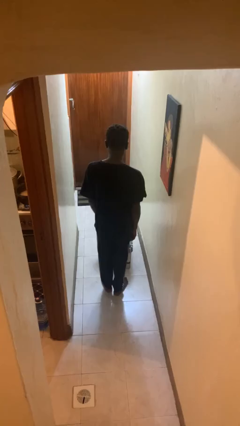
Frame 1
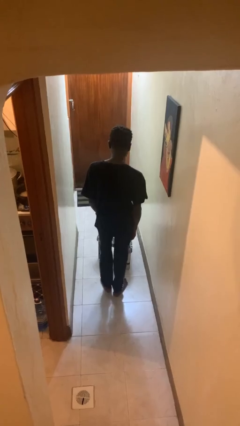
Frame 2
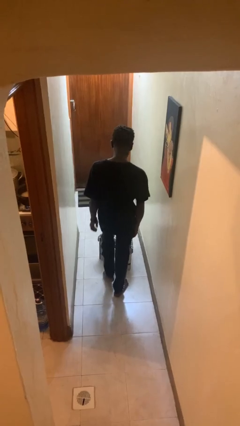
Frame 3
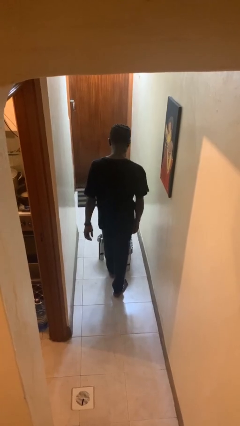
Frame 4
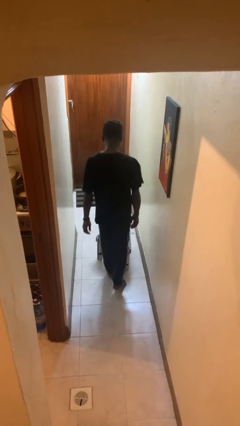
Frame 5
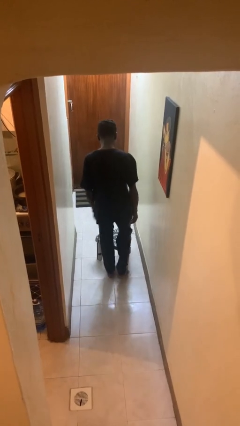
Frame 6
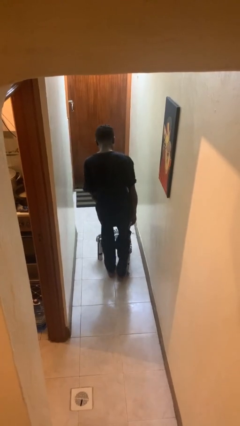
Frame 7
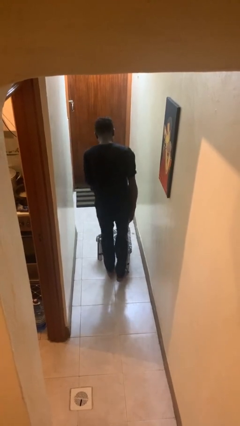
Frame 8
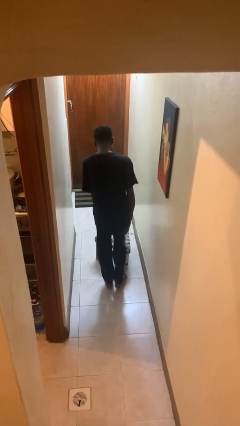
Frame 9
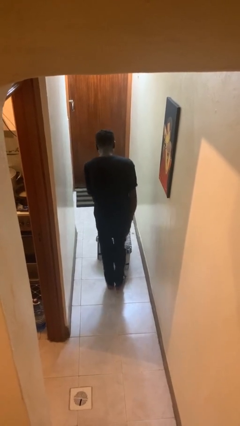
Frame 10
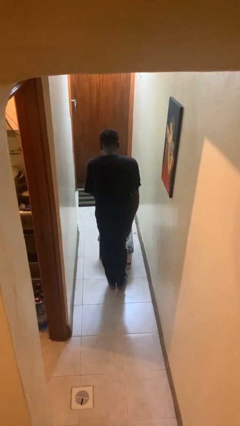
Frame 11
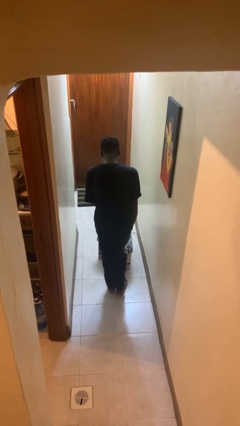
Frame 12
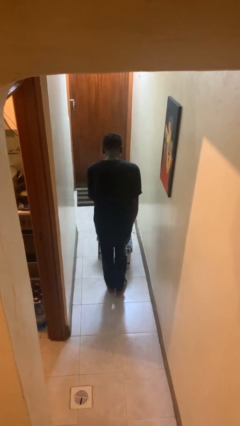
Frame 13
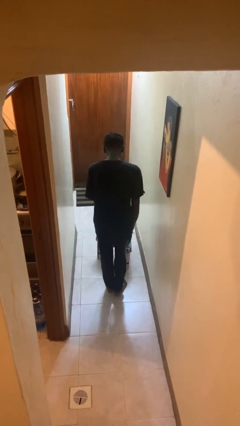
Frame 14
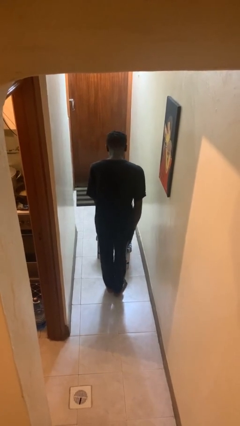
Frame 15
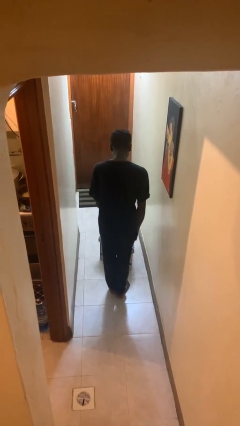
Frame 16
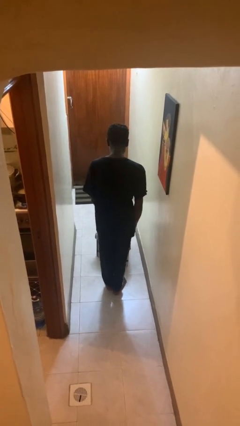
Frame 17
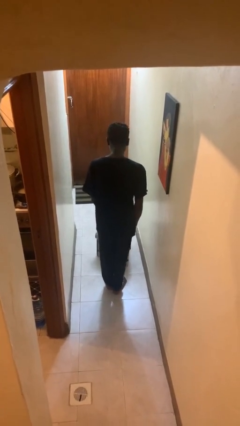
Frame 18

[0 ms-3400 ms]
person stubs toe

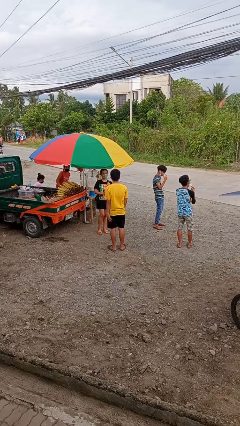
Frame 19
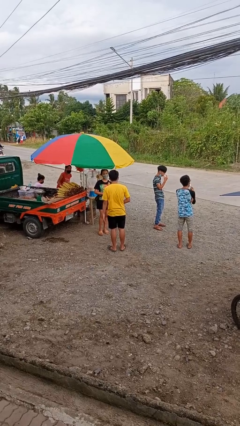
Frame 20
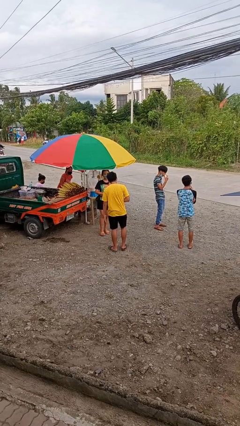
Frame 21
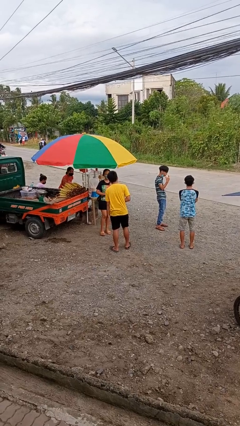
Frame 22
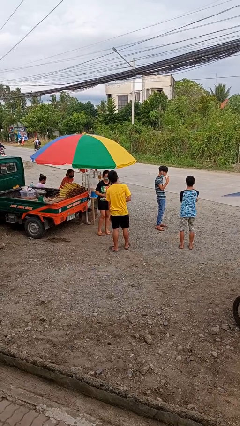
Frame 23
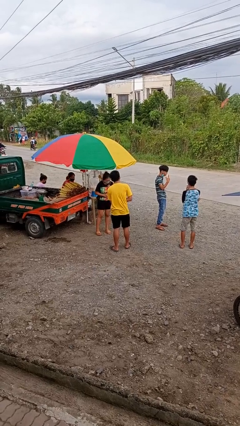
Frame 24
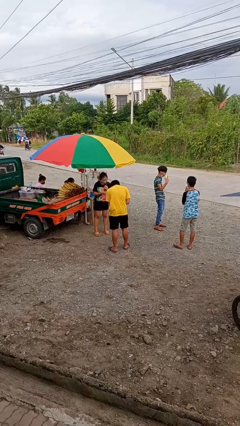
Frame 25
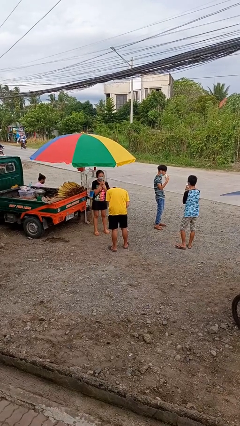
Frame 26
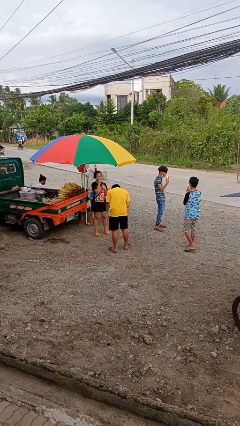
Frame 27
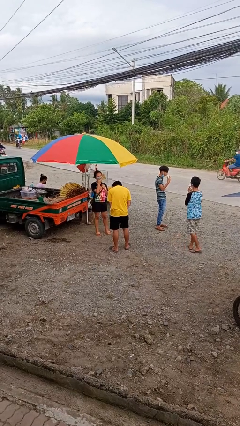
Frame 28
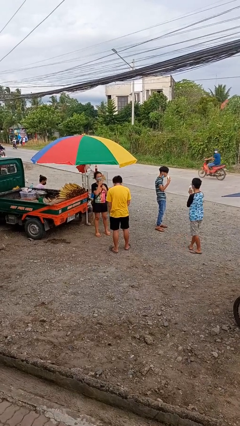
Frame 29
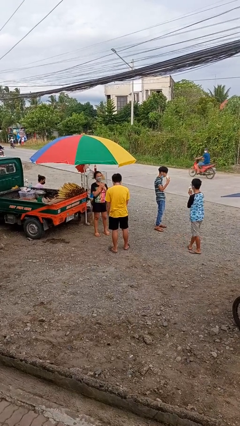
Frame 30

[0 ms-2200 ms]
person laughs with person

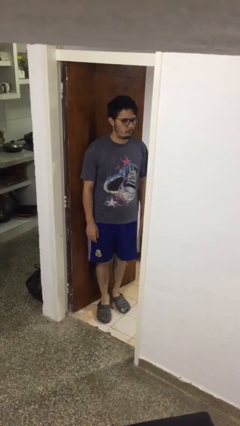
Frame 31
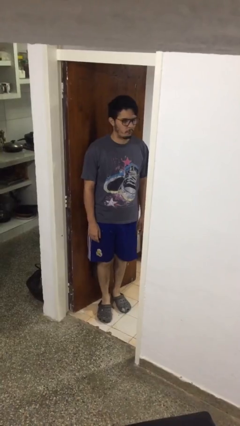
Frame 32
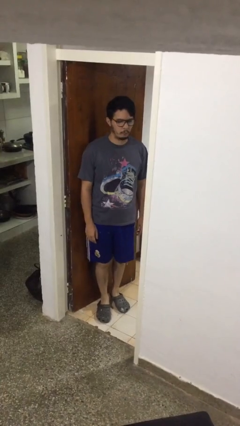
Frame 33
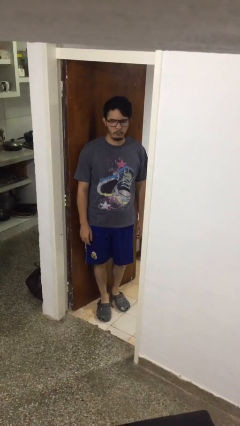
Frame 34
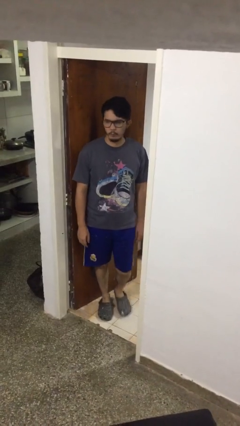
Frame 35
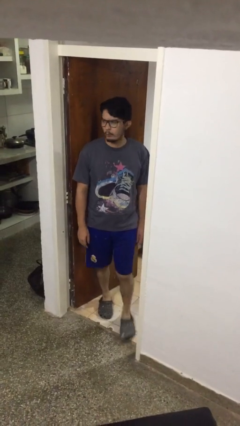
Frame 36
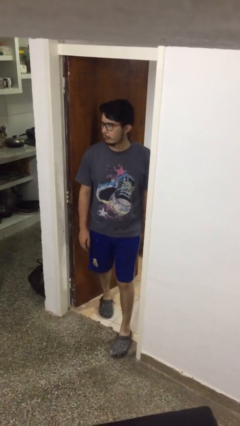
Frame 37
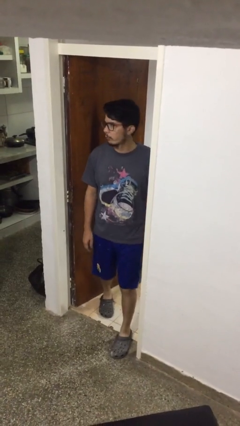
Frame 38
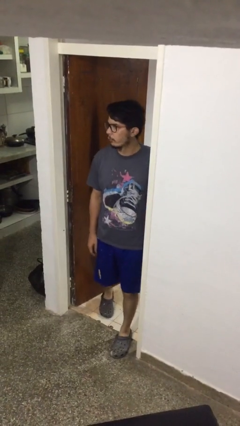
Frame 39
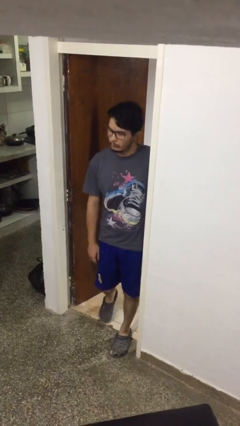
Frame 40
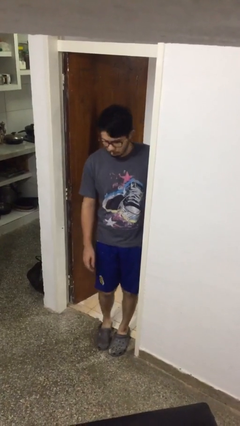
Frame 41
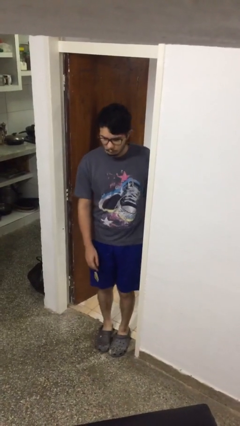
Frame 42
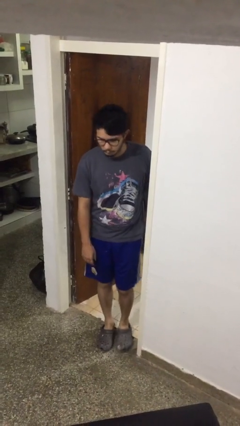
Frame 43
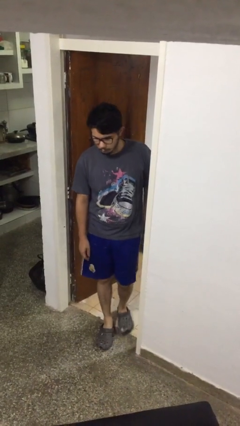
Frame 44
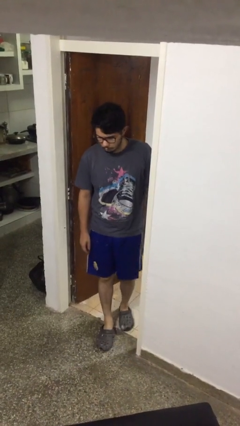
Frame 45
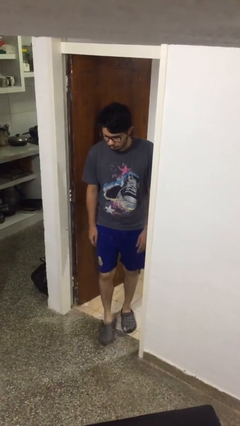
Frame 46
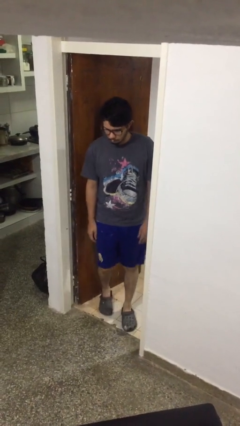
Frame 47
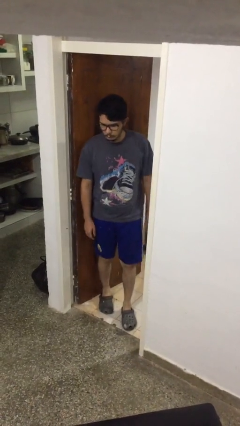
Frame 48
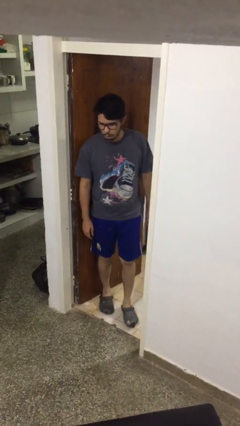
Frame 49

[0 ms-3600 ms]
person bumps into wall

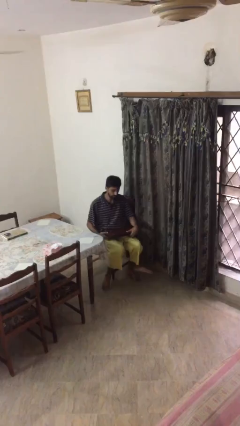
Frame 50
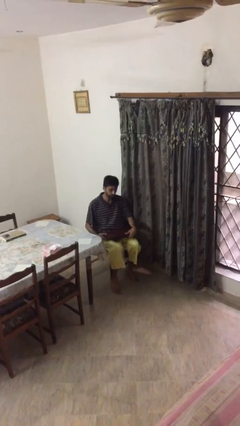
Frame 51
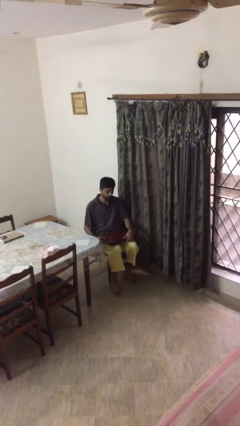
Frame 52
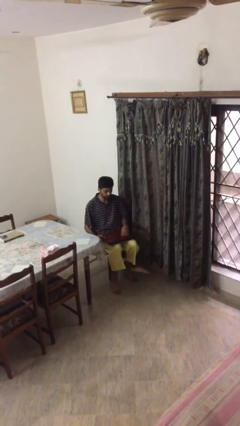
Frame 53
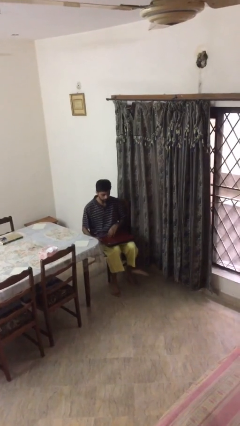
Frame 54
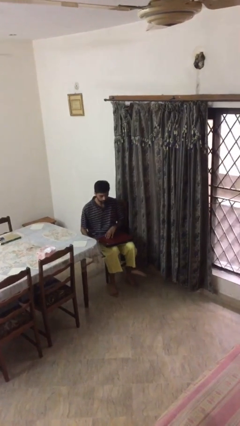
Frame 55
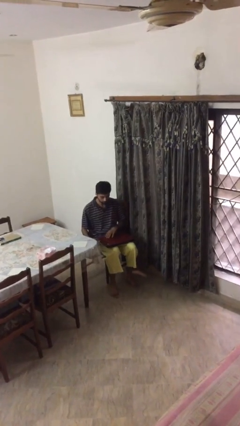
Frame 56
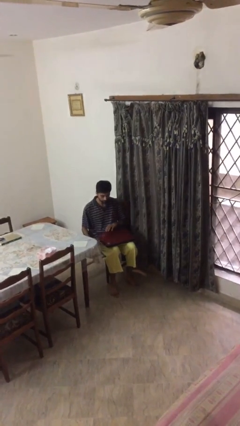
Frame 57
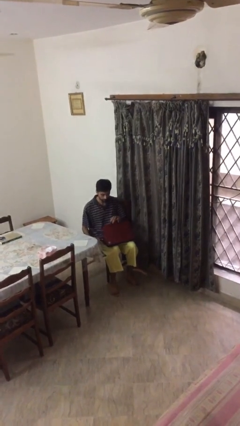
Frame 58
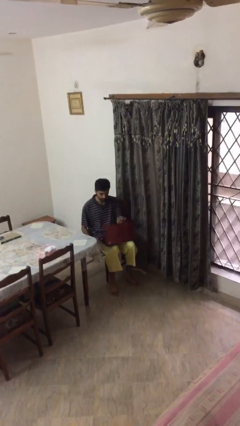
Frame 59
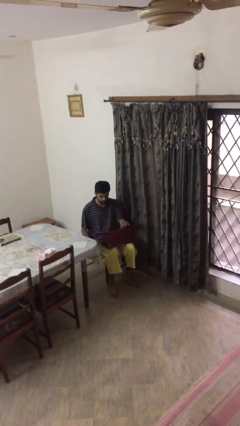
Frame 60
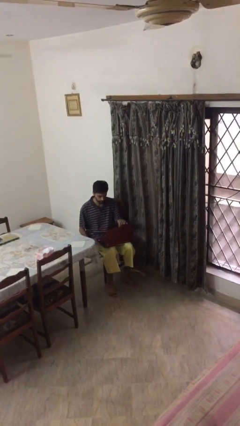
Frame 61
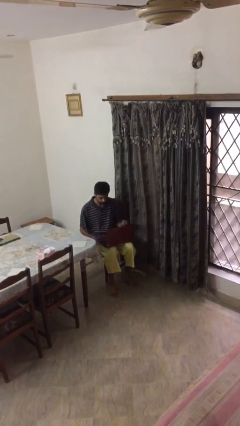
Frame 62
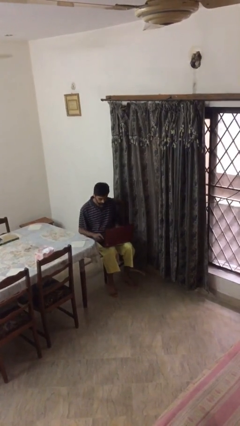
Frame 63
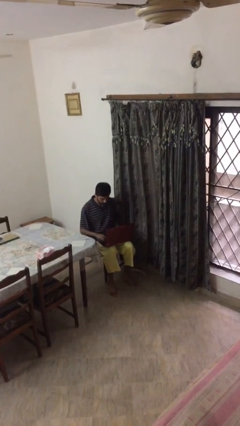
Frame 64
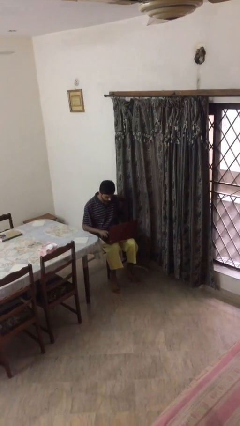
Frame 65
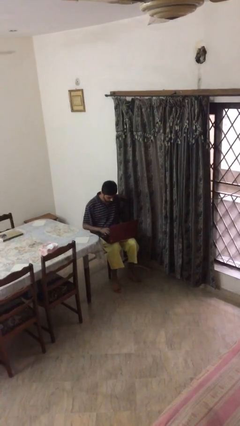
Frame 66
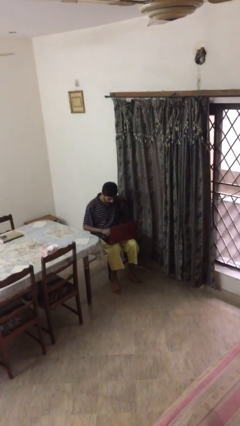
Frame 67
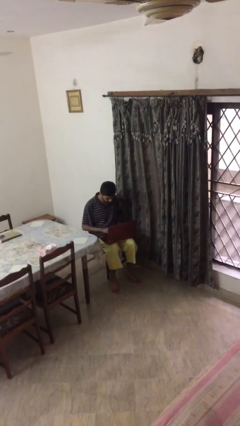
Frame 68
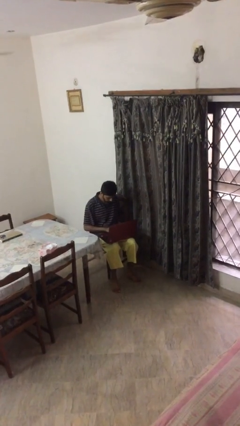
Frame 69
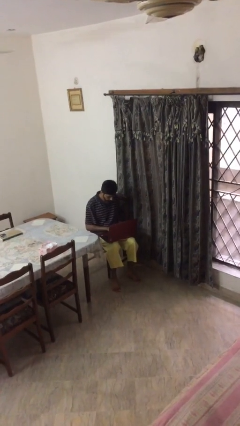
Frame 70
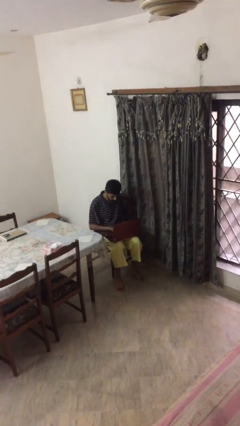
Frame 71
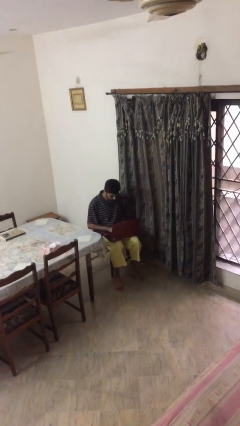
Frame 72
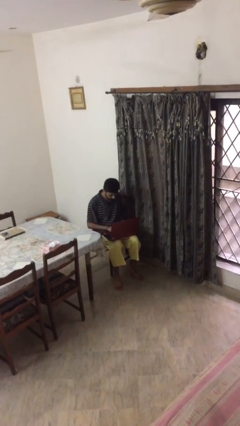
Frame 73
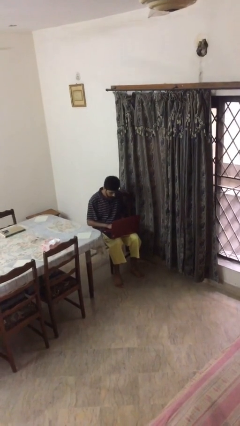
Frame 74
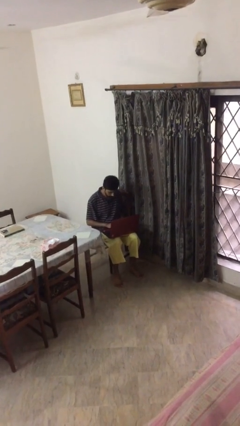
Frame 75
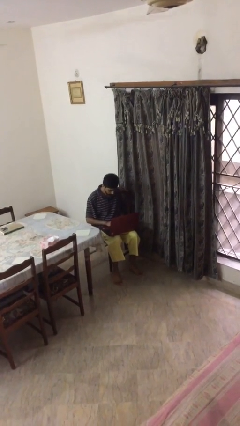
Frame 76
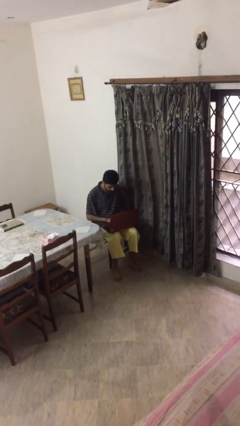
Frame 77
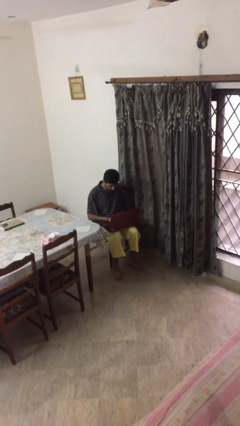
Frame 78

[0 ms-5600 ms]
person interacts with laptop

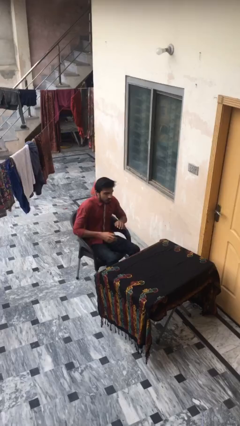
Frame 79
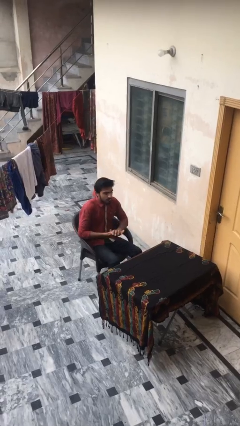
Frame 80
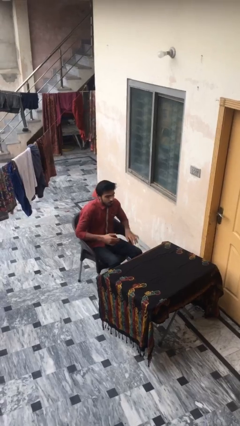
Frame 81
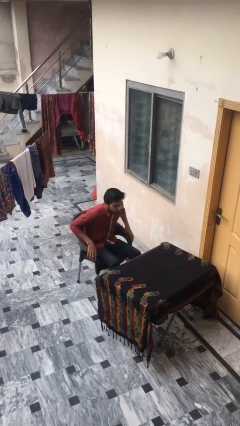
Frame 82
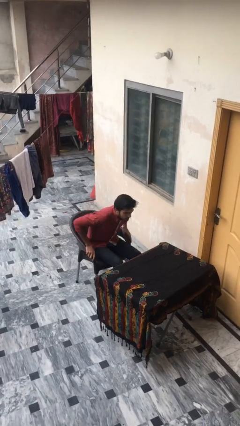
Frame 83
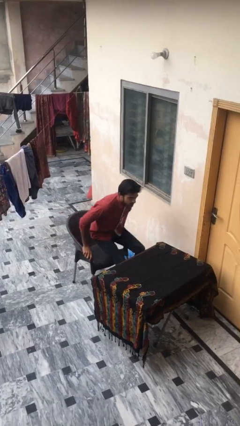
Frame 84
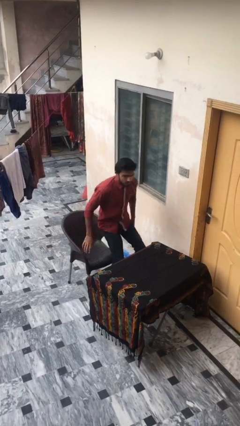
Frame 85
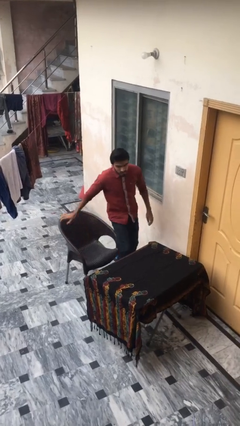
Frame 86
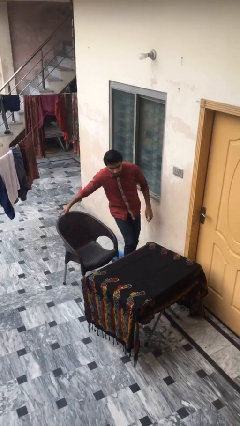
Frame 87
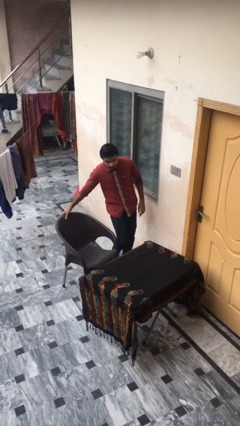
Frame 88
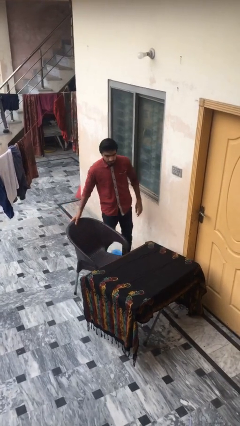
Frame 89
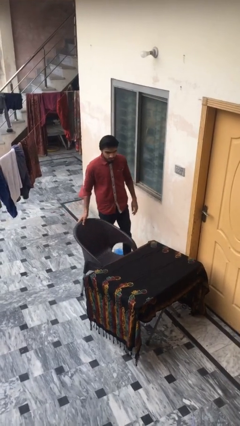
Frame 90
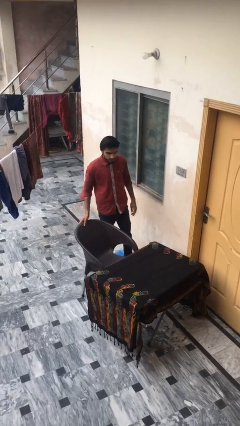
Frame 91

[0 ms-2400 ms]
person stands up
